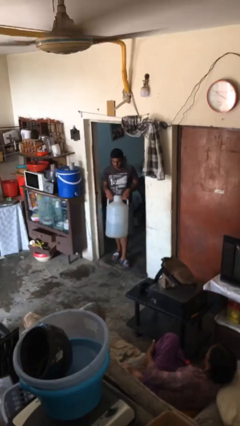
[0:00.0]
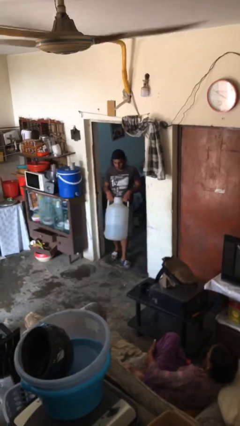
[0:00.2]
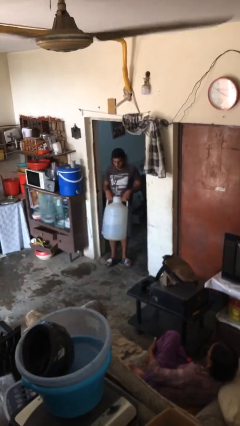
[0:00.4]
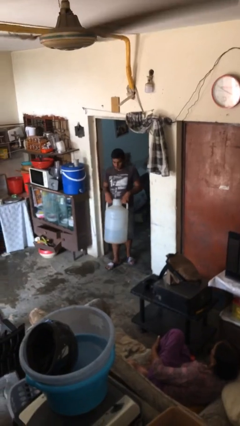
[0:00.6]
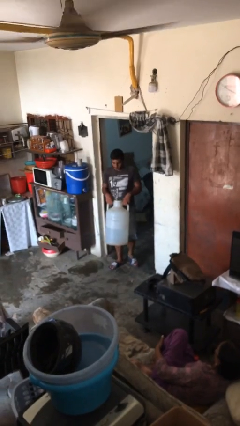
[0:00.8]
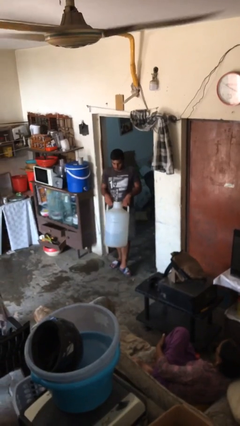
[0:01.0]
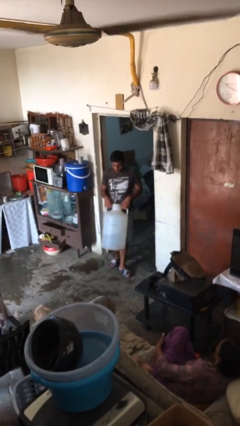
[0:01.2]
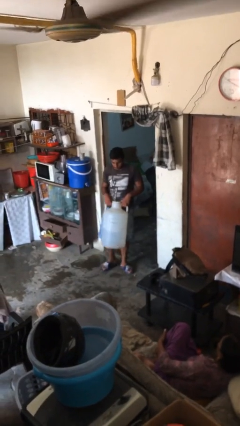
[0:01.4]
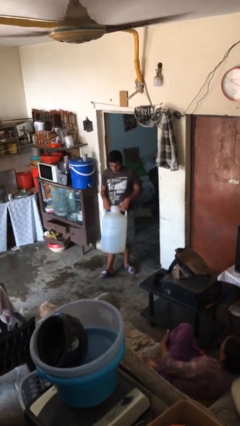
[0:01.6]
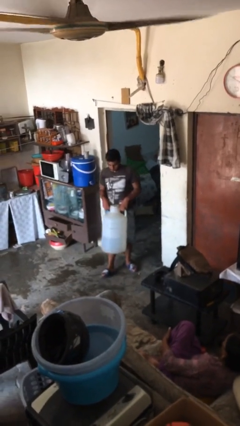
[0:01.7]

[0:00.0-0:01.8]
person carries heavy object

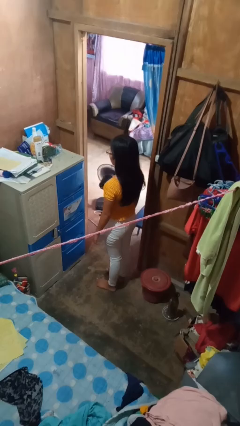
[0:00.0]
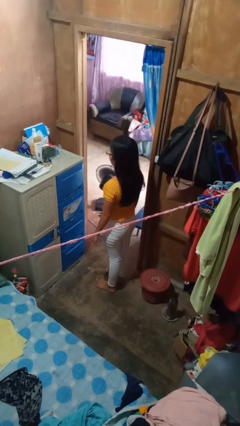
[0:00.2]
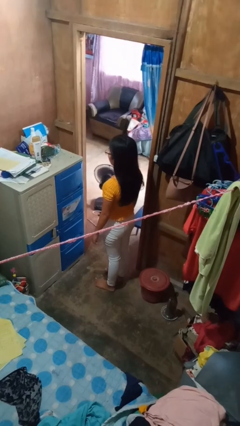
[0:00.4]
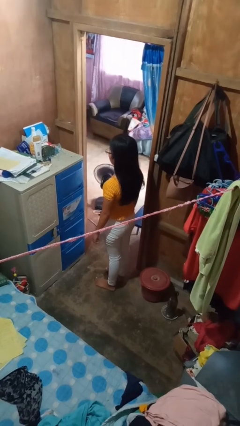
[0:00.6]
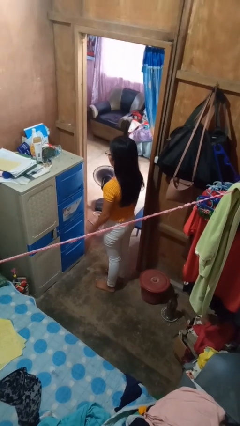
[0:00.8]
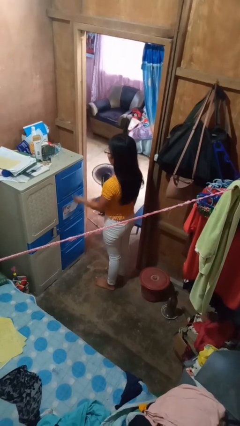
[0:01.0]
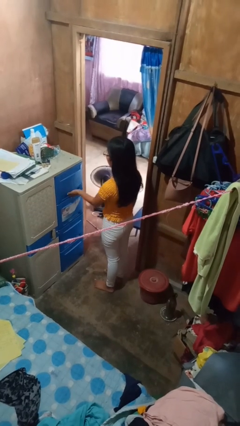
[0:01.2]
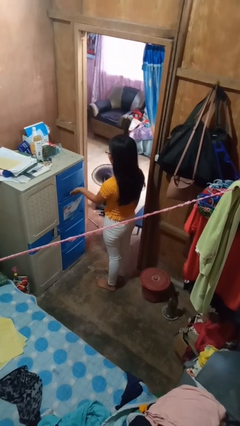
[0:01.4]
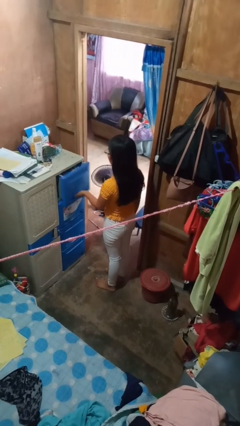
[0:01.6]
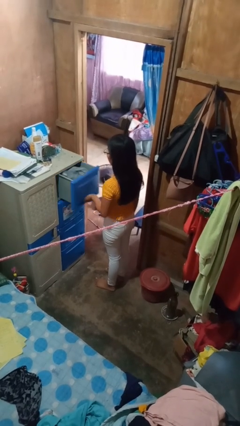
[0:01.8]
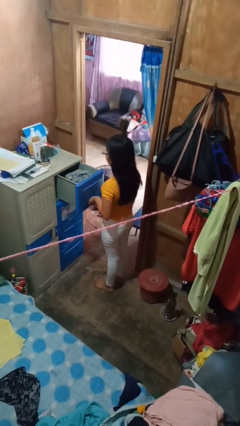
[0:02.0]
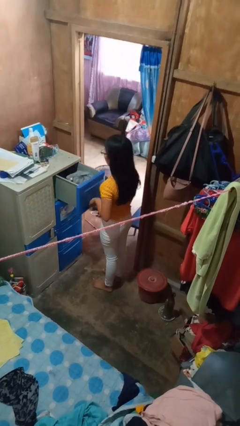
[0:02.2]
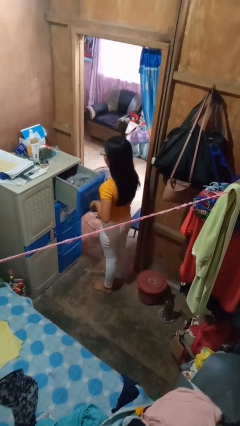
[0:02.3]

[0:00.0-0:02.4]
person opens dresser drawer

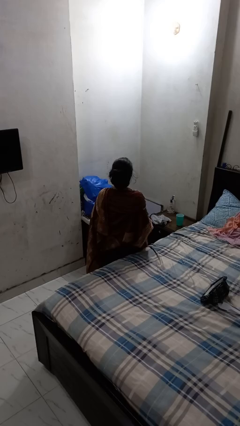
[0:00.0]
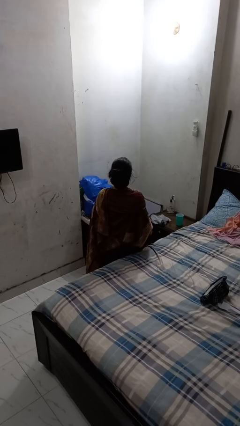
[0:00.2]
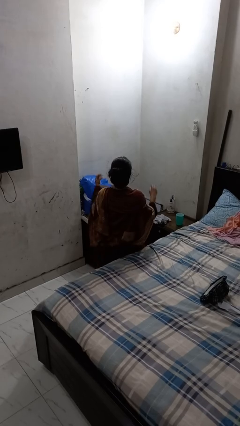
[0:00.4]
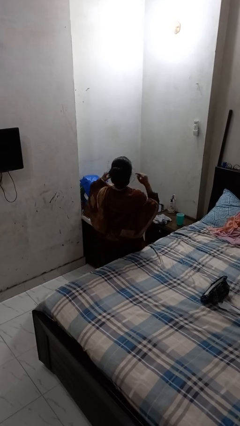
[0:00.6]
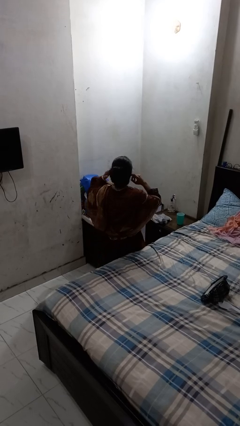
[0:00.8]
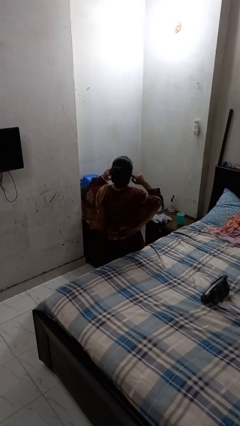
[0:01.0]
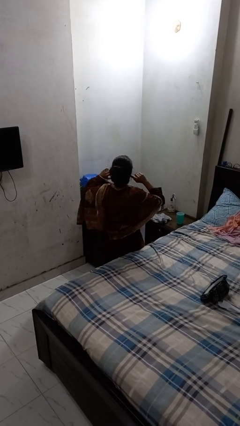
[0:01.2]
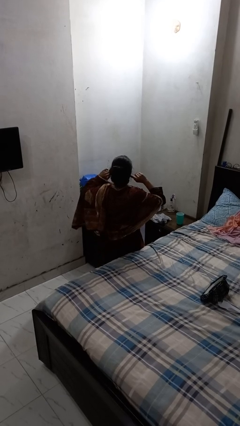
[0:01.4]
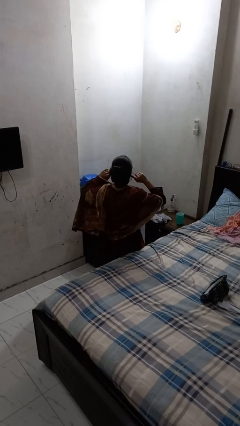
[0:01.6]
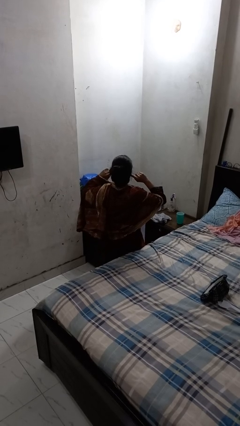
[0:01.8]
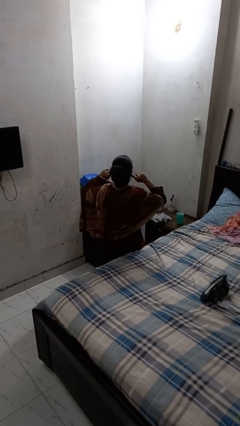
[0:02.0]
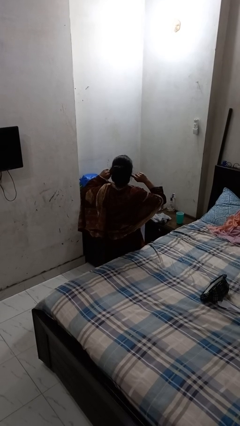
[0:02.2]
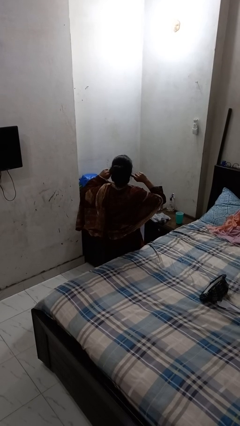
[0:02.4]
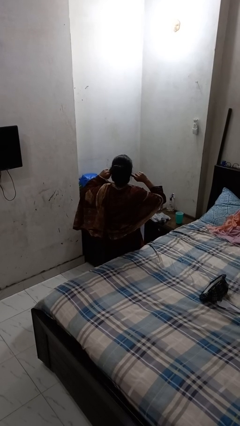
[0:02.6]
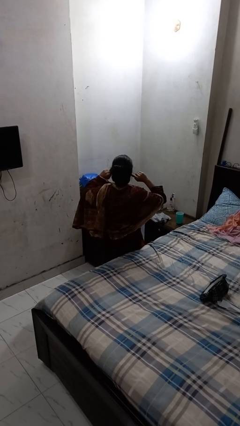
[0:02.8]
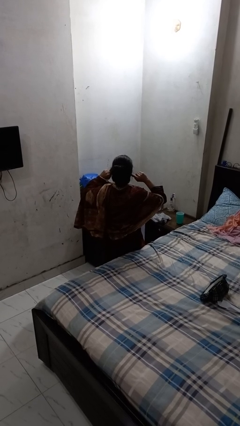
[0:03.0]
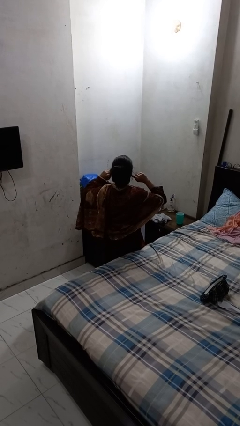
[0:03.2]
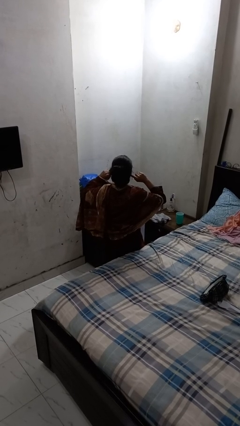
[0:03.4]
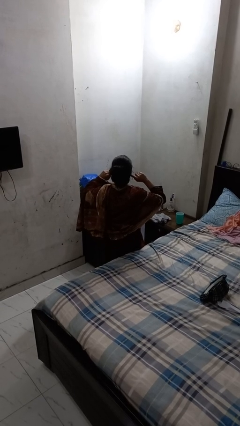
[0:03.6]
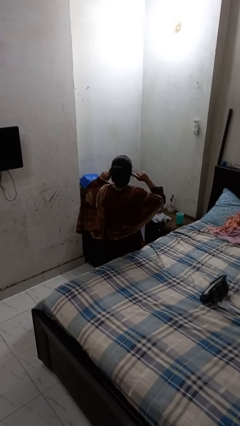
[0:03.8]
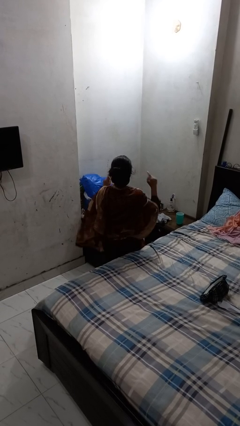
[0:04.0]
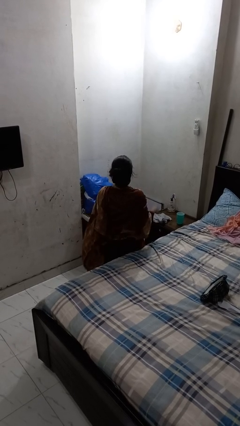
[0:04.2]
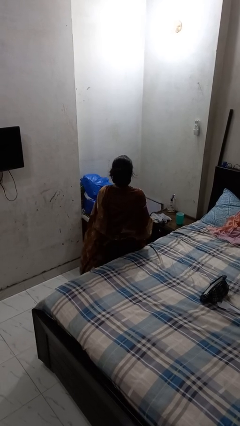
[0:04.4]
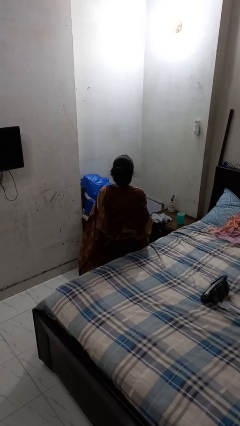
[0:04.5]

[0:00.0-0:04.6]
person puts fingers in ear

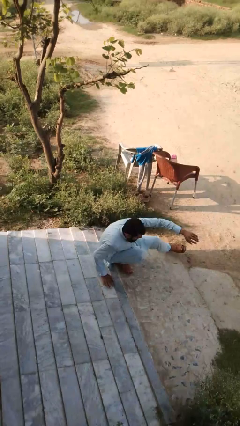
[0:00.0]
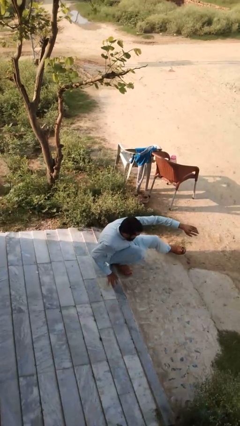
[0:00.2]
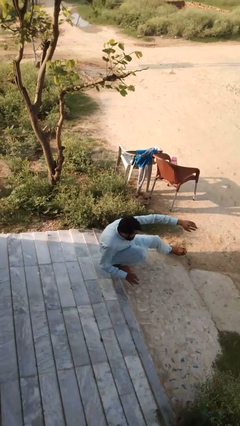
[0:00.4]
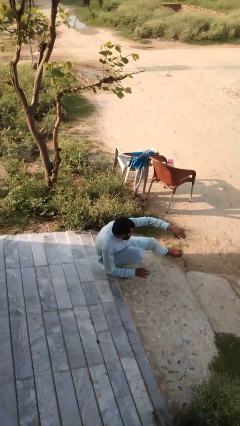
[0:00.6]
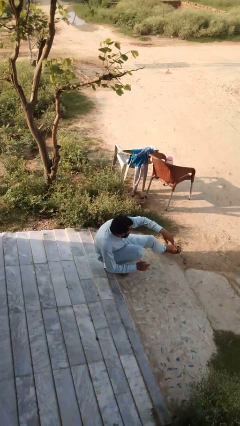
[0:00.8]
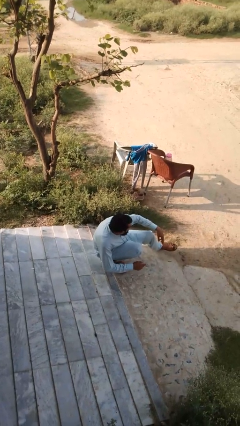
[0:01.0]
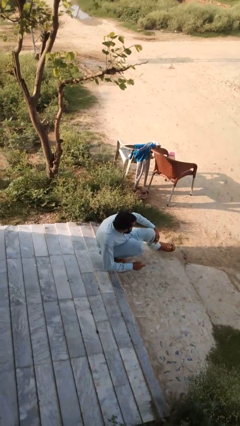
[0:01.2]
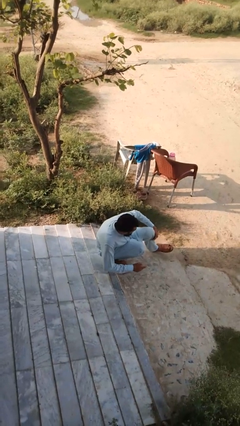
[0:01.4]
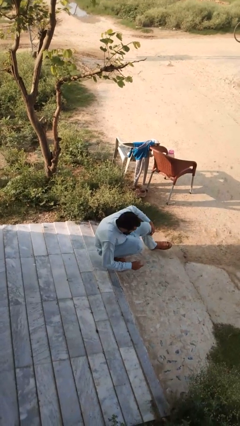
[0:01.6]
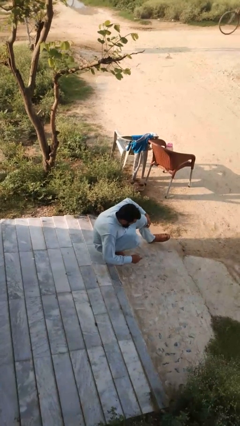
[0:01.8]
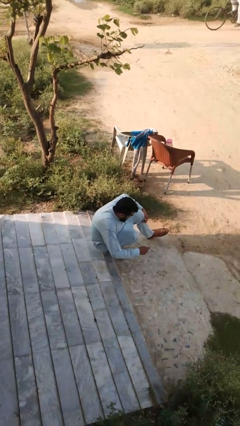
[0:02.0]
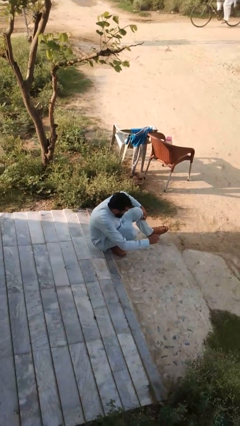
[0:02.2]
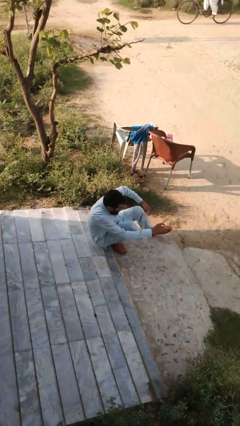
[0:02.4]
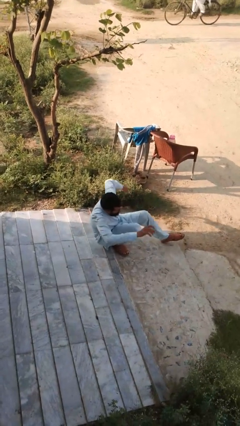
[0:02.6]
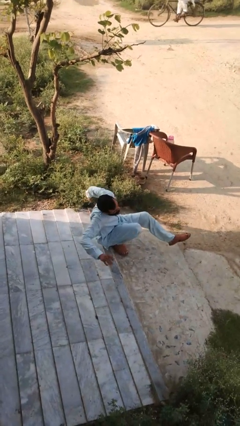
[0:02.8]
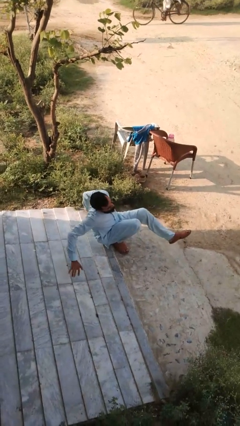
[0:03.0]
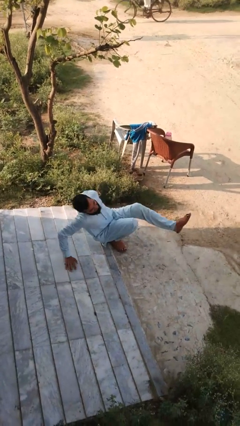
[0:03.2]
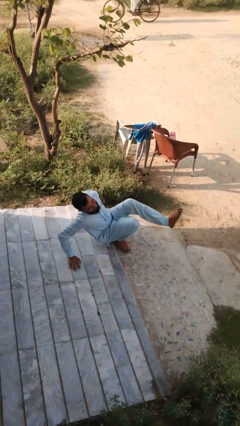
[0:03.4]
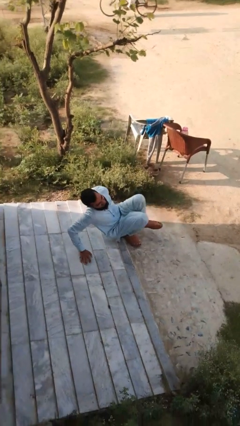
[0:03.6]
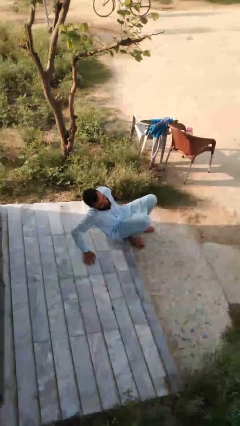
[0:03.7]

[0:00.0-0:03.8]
person lies down on floor

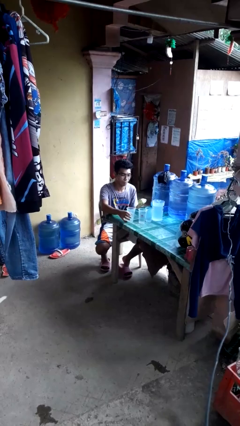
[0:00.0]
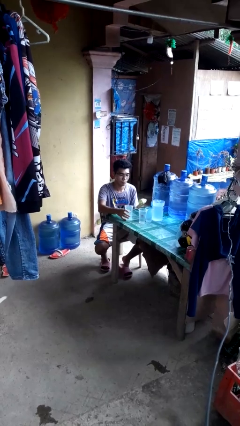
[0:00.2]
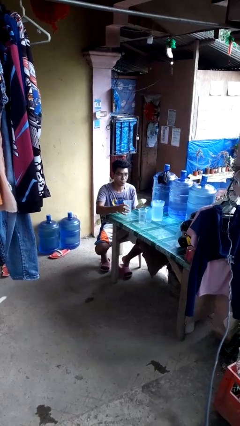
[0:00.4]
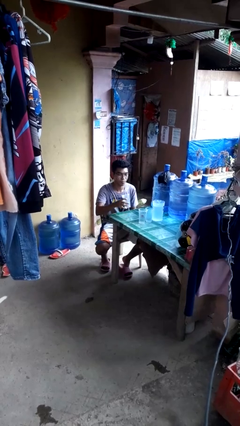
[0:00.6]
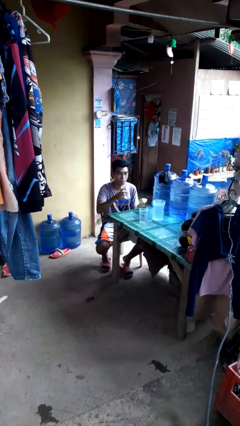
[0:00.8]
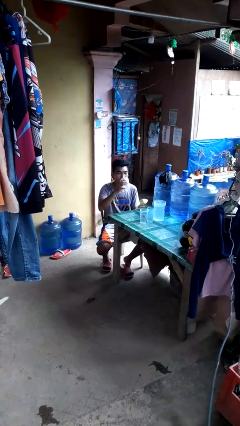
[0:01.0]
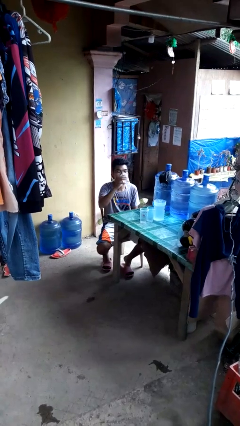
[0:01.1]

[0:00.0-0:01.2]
person picks up object from table

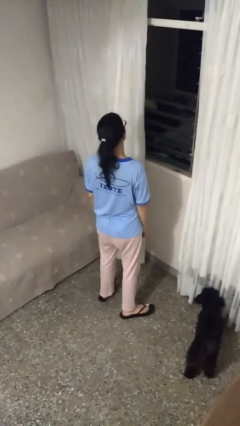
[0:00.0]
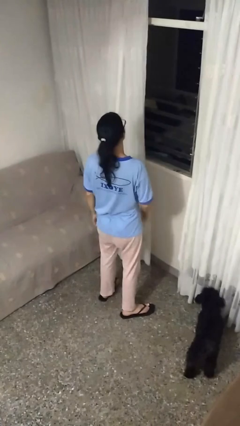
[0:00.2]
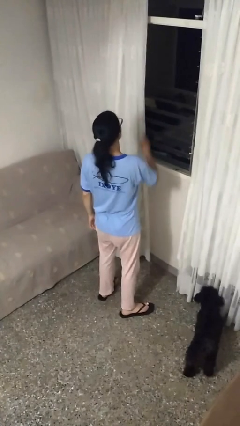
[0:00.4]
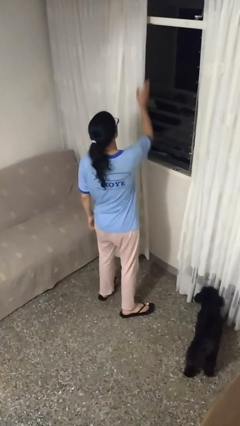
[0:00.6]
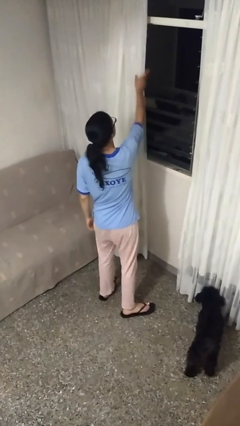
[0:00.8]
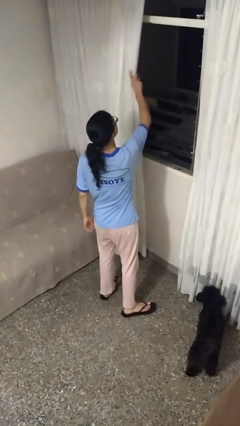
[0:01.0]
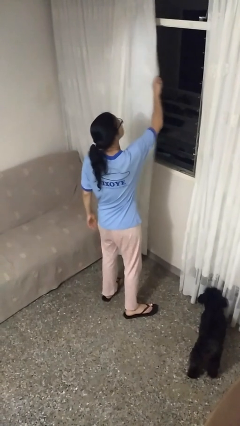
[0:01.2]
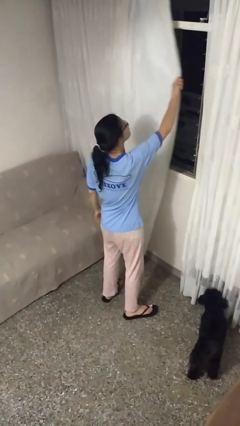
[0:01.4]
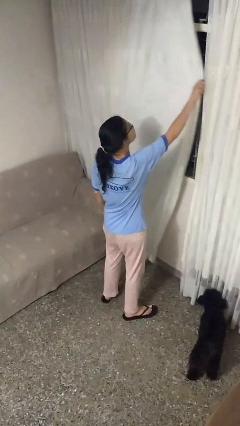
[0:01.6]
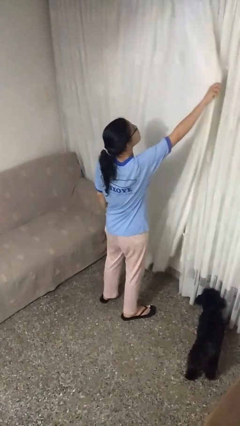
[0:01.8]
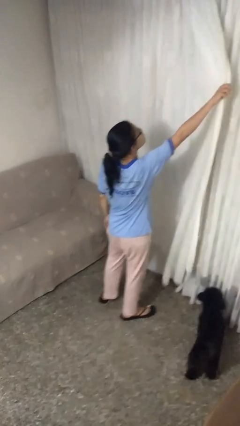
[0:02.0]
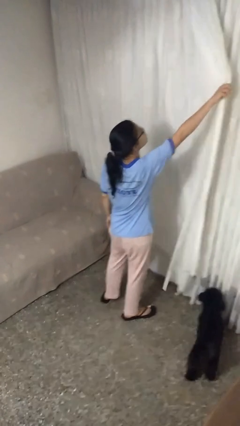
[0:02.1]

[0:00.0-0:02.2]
person closes curtains

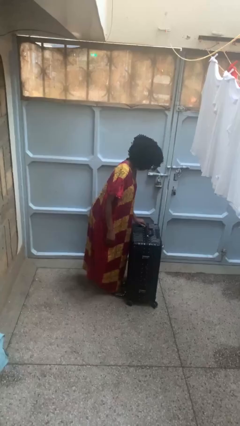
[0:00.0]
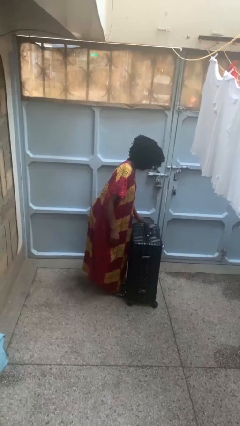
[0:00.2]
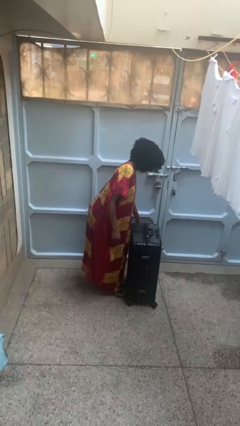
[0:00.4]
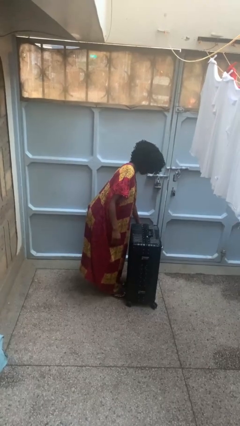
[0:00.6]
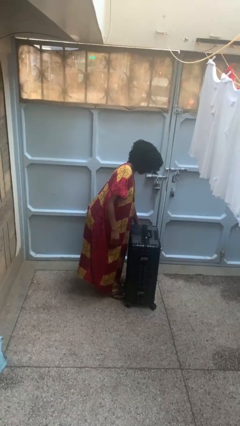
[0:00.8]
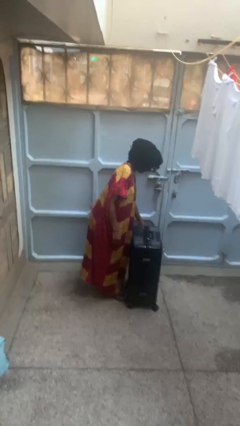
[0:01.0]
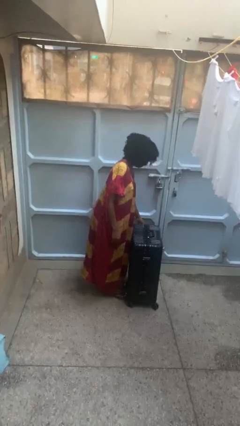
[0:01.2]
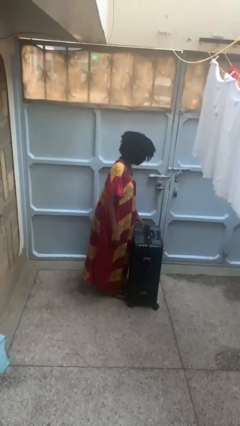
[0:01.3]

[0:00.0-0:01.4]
person closes suitcase
